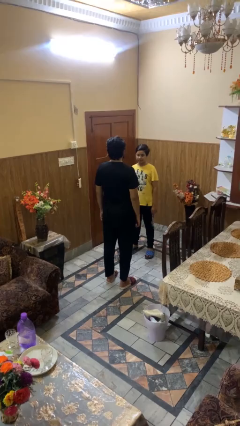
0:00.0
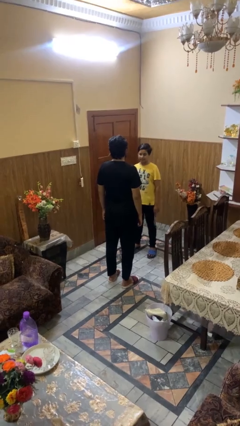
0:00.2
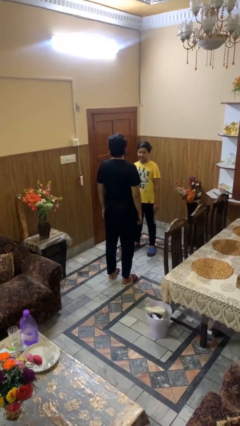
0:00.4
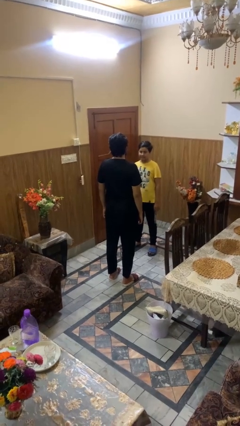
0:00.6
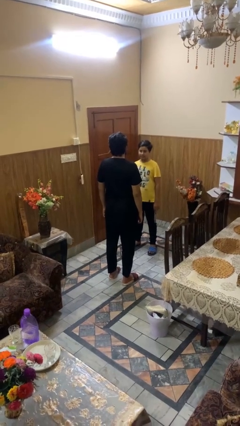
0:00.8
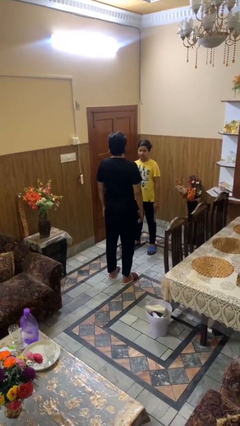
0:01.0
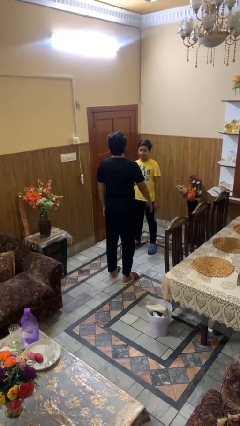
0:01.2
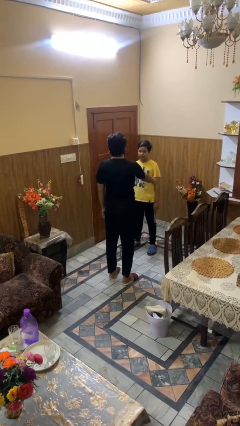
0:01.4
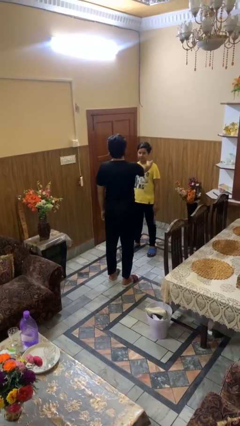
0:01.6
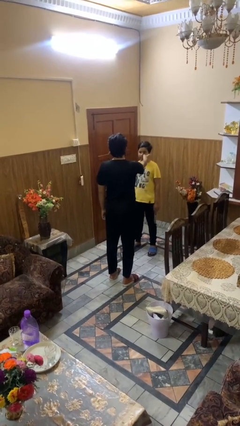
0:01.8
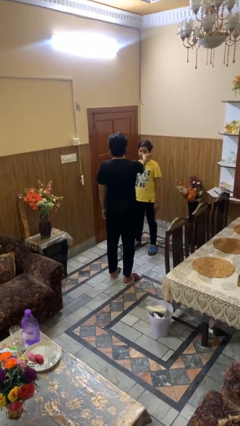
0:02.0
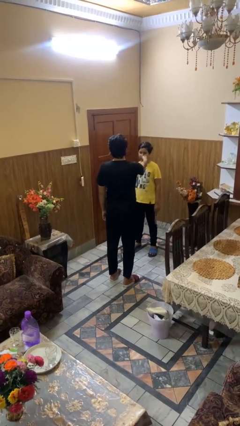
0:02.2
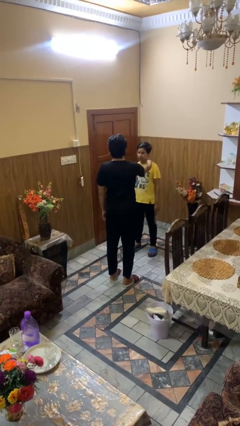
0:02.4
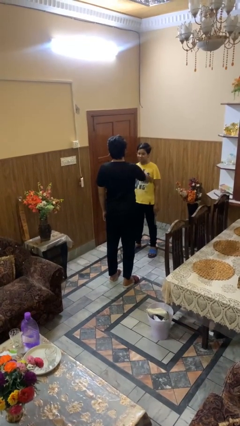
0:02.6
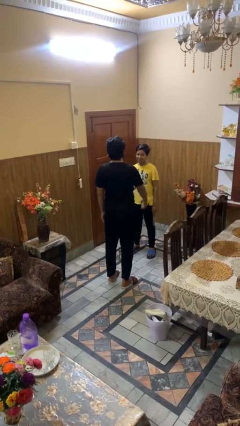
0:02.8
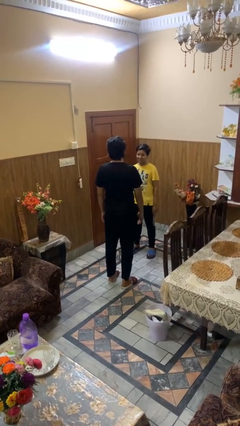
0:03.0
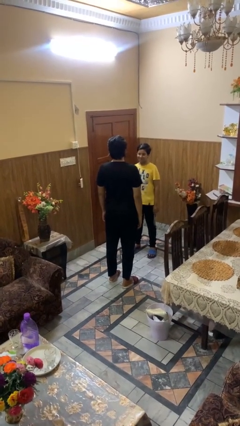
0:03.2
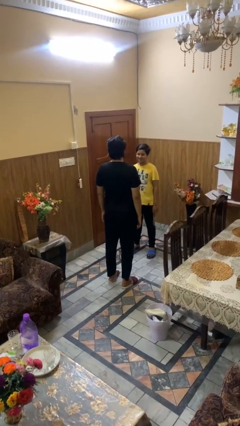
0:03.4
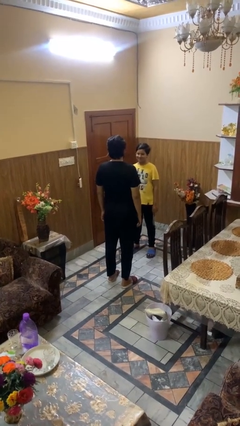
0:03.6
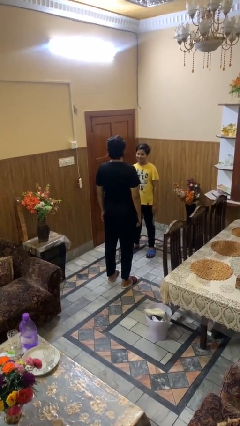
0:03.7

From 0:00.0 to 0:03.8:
person touches face of person

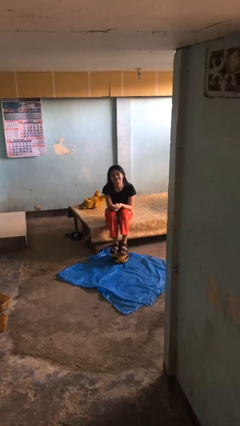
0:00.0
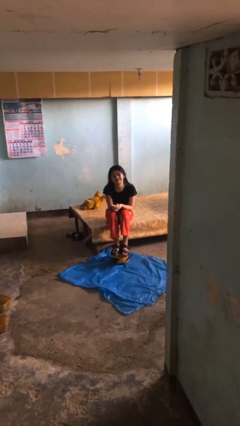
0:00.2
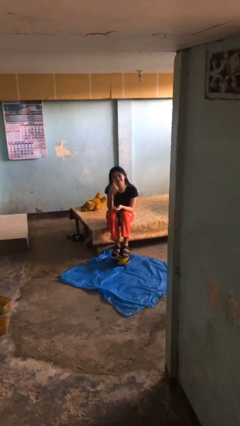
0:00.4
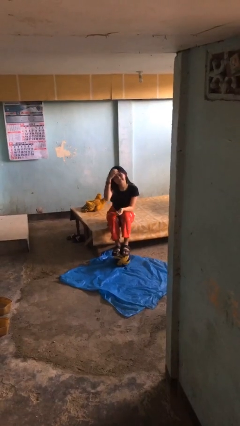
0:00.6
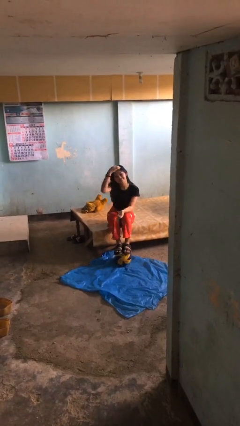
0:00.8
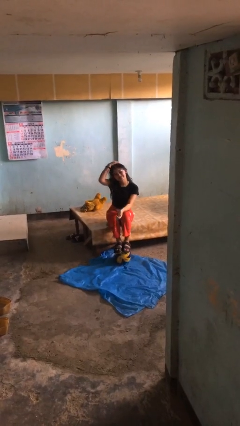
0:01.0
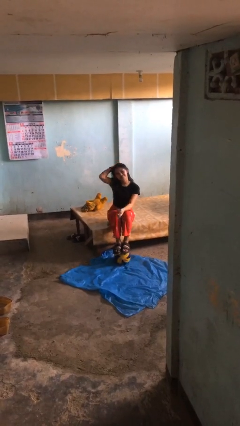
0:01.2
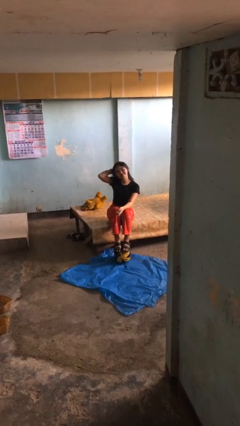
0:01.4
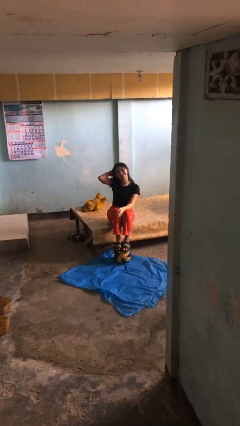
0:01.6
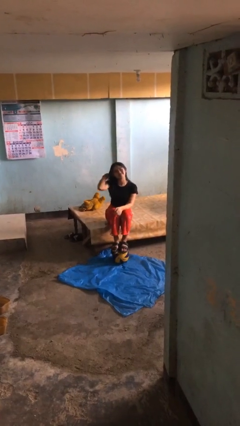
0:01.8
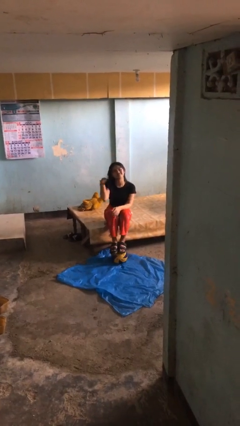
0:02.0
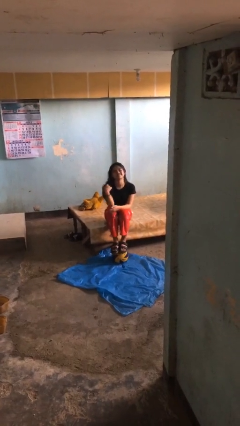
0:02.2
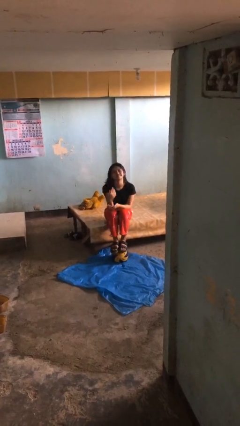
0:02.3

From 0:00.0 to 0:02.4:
person strokes hair

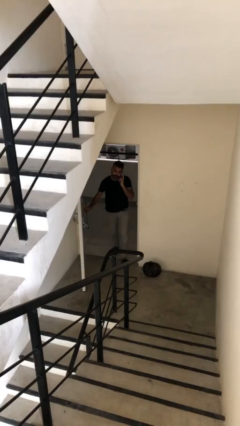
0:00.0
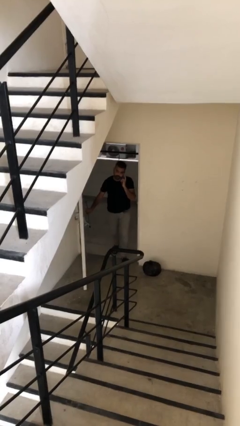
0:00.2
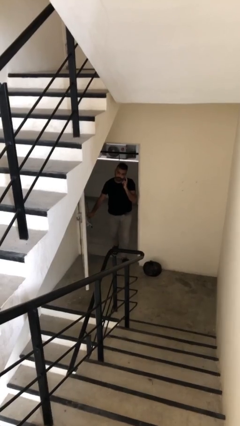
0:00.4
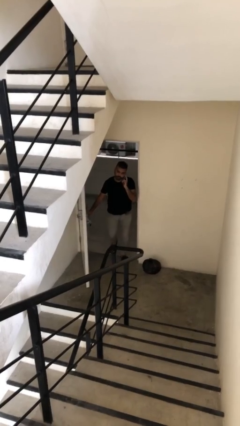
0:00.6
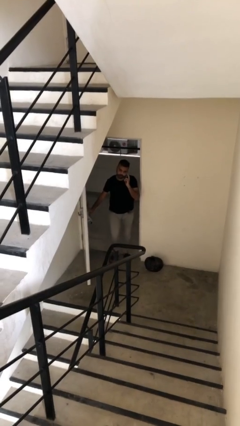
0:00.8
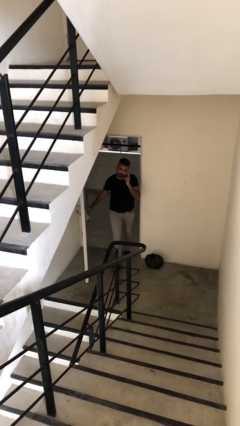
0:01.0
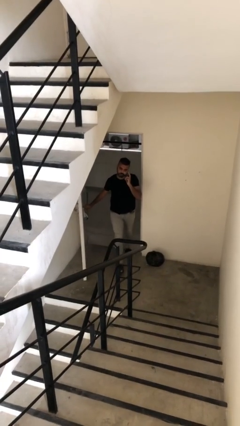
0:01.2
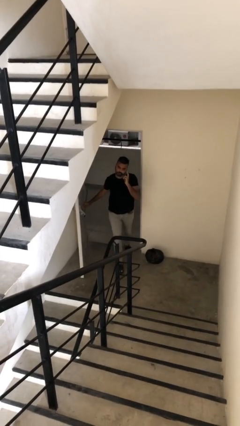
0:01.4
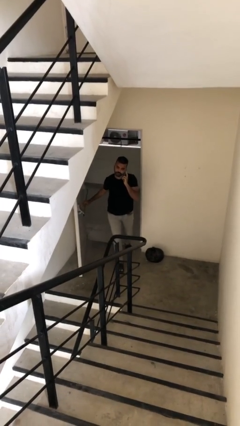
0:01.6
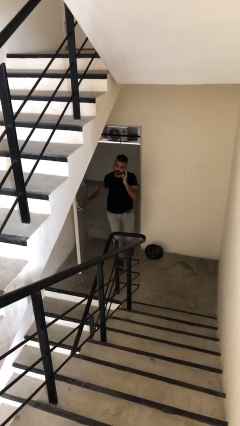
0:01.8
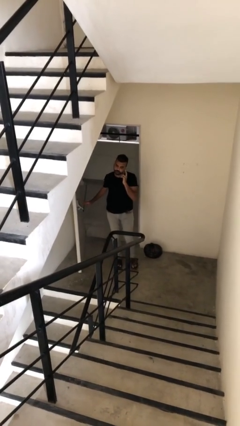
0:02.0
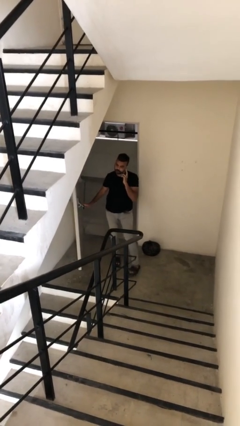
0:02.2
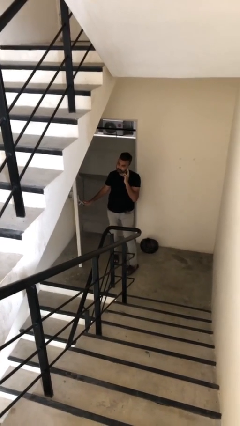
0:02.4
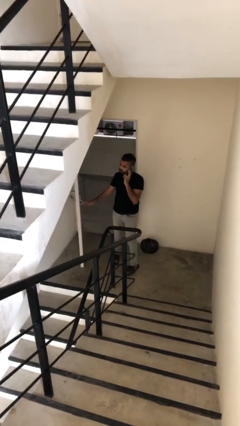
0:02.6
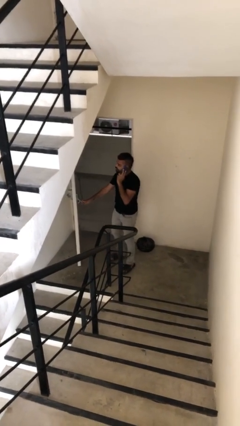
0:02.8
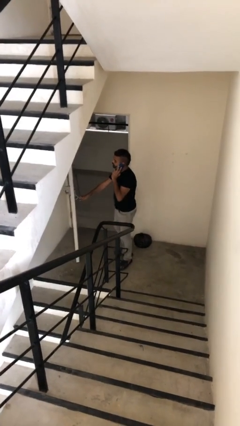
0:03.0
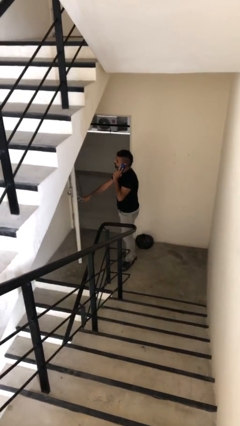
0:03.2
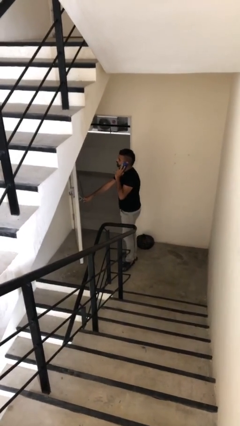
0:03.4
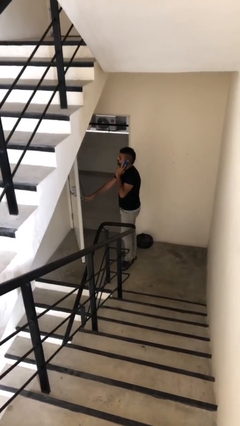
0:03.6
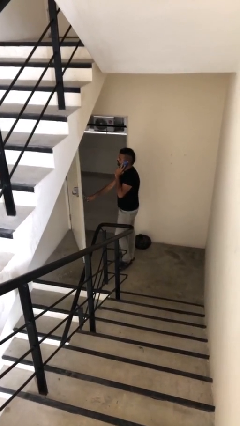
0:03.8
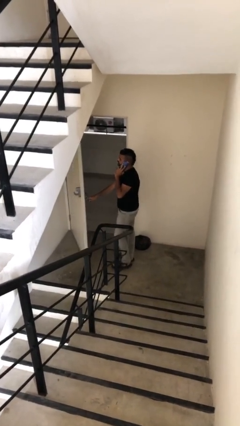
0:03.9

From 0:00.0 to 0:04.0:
person enters scene through structure

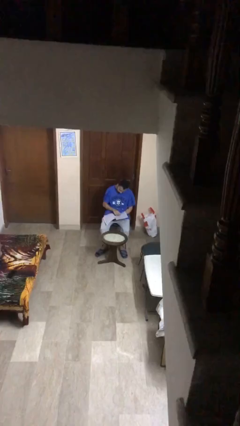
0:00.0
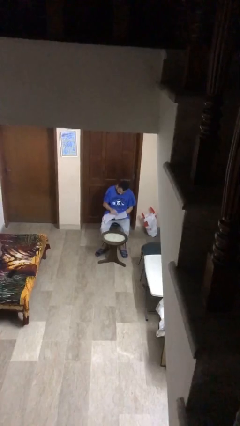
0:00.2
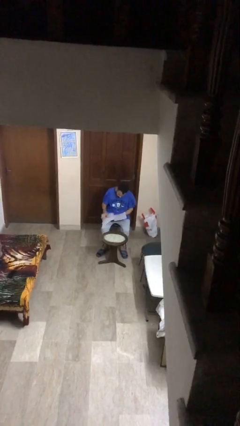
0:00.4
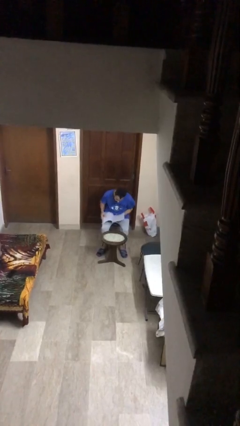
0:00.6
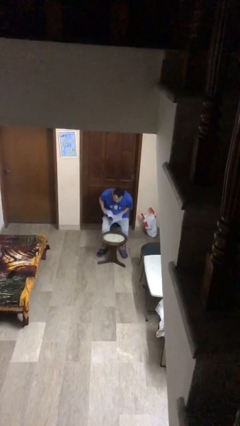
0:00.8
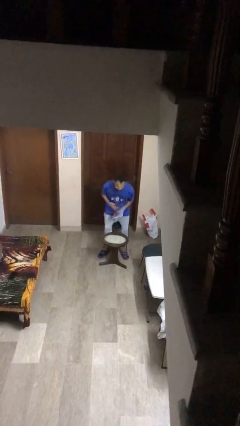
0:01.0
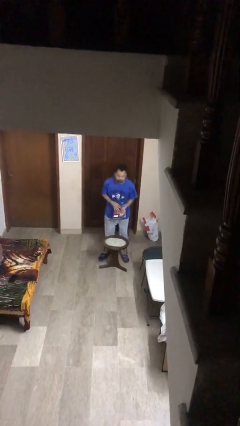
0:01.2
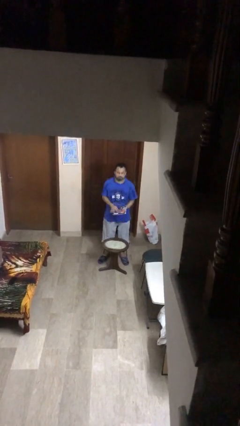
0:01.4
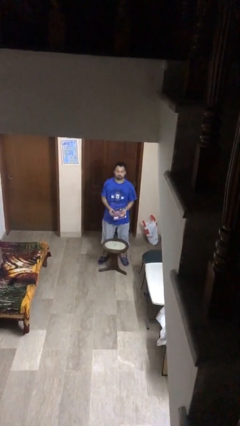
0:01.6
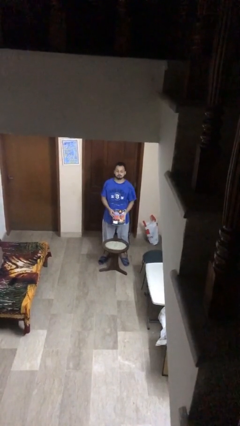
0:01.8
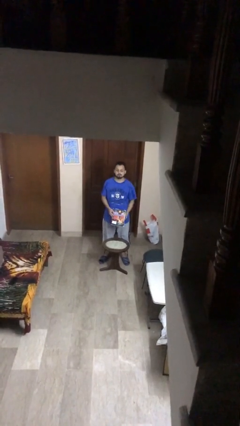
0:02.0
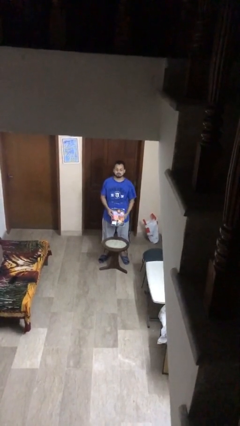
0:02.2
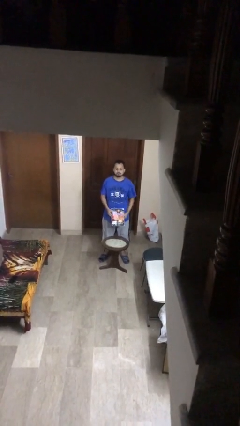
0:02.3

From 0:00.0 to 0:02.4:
person stands up

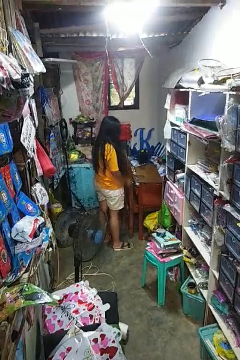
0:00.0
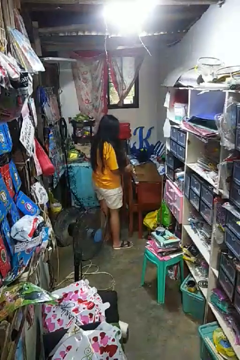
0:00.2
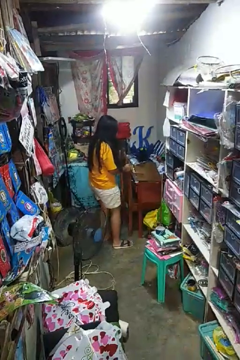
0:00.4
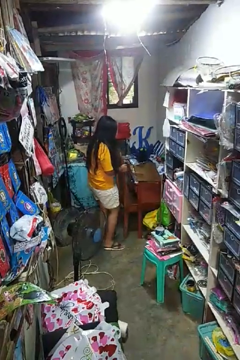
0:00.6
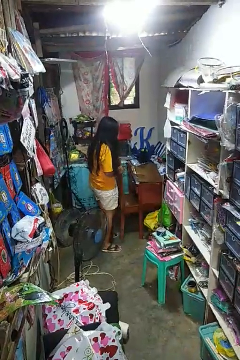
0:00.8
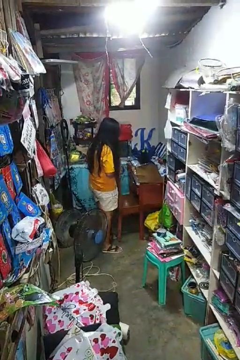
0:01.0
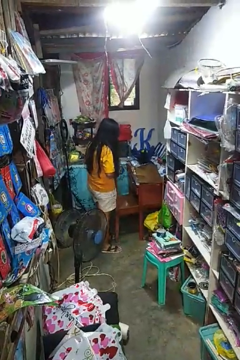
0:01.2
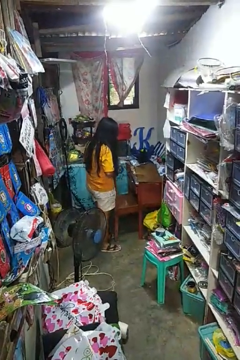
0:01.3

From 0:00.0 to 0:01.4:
person pulls out chair

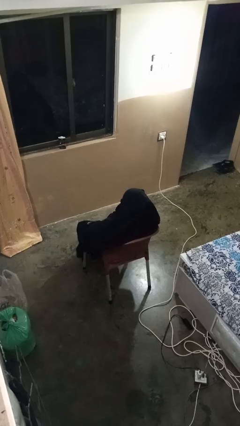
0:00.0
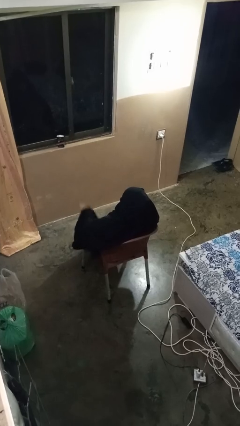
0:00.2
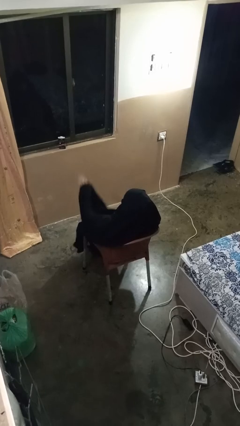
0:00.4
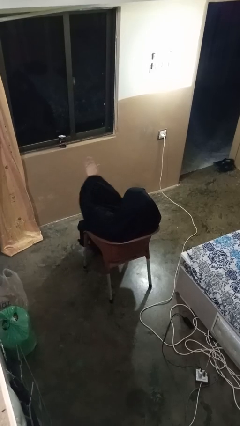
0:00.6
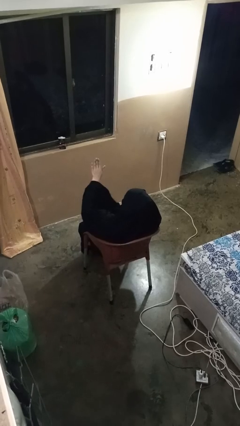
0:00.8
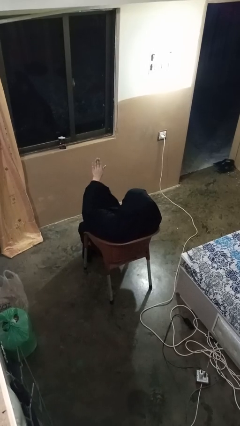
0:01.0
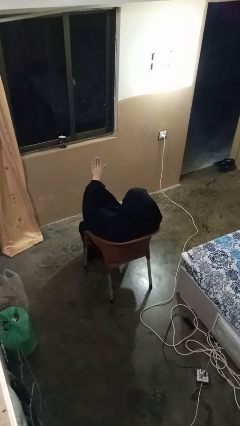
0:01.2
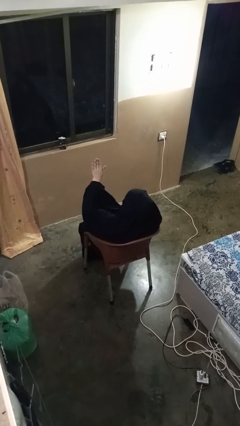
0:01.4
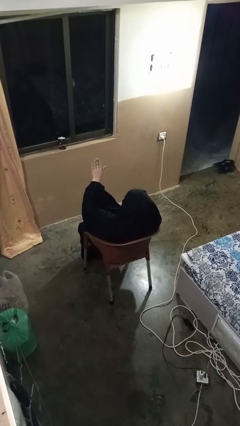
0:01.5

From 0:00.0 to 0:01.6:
person gestures raise hand

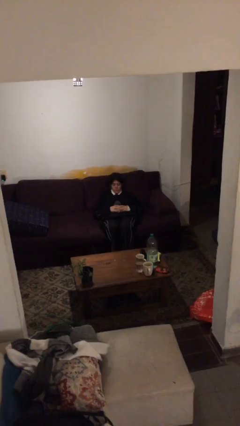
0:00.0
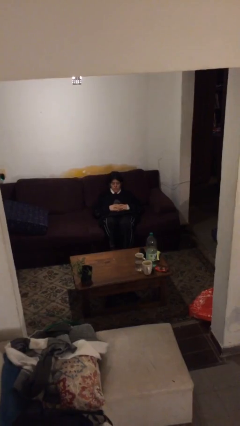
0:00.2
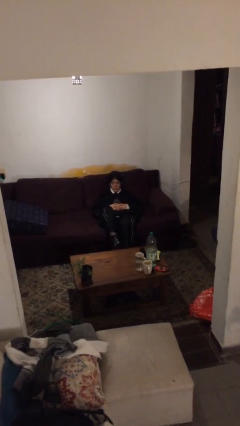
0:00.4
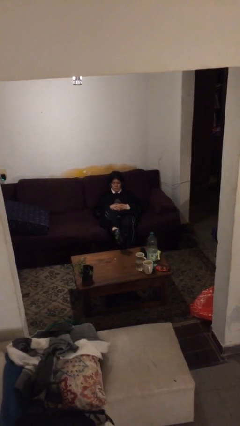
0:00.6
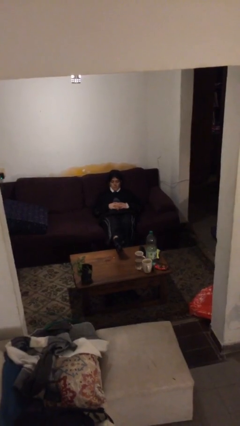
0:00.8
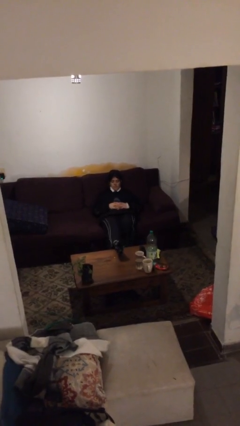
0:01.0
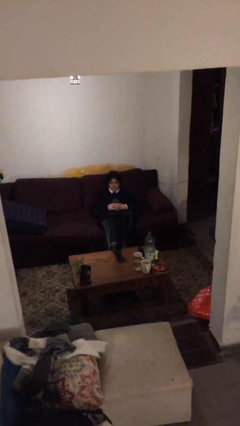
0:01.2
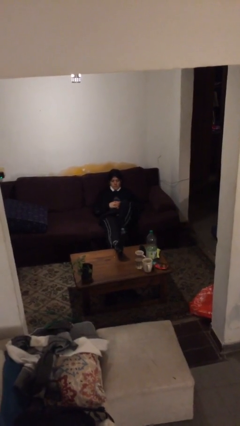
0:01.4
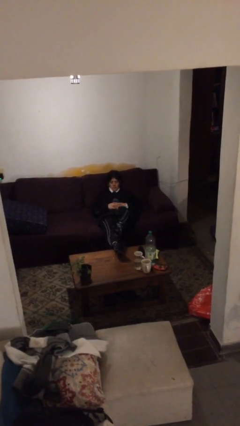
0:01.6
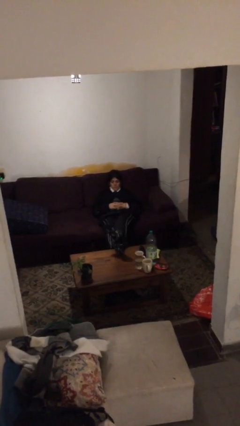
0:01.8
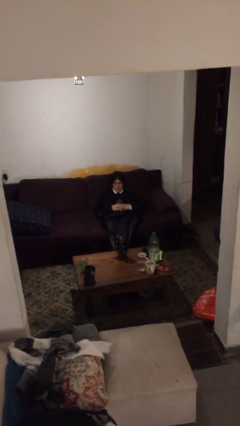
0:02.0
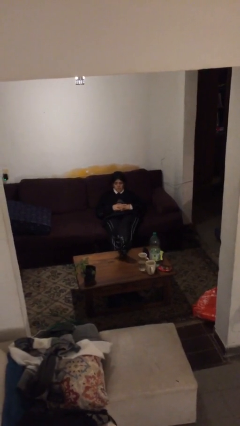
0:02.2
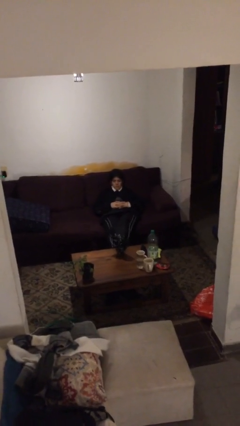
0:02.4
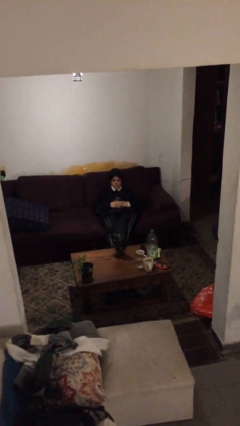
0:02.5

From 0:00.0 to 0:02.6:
person puts feet up
